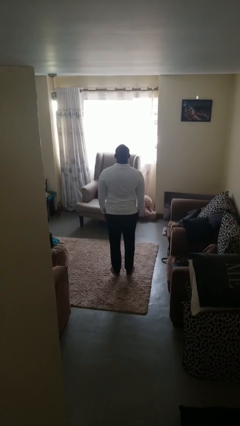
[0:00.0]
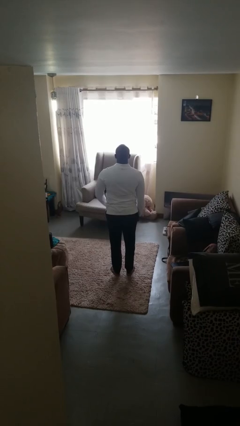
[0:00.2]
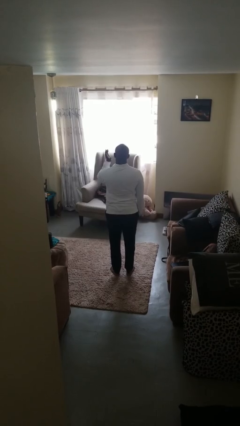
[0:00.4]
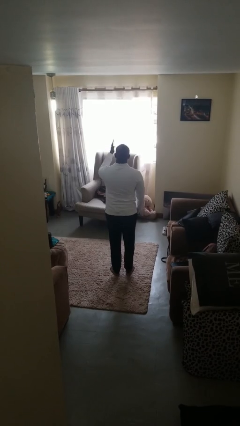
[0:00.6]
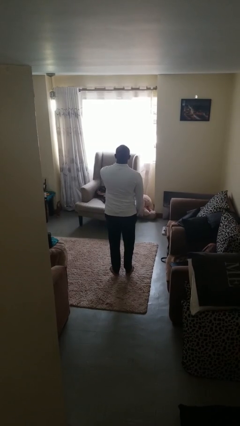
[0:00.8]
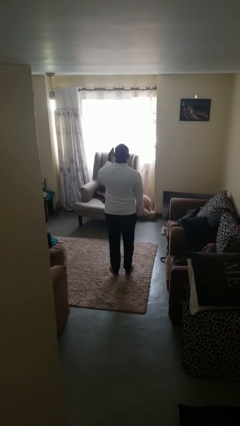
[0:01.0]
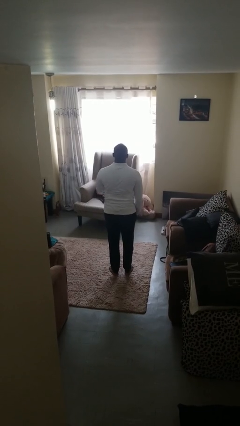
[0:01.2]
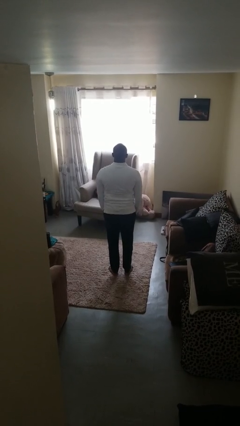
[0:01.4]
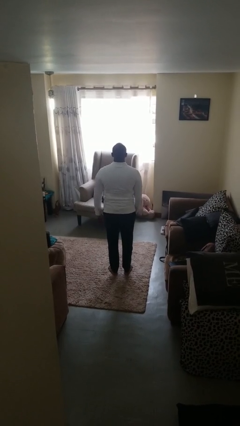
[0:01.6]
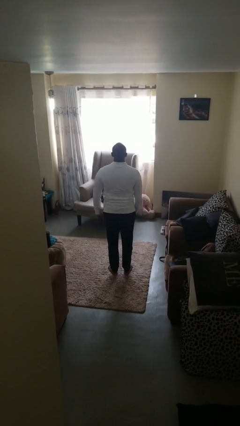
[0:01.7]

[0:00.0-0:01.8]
person karate chop

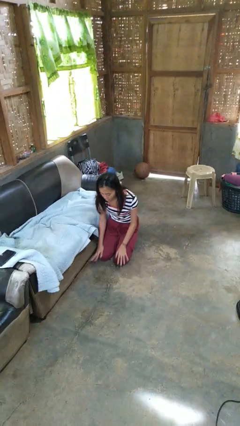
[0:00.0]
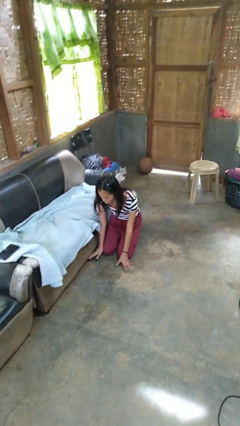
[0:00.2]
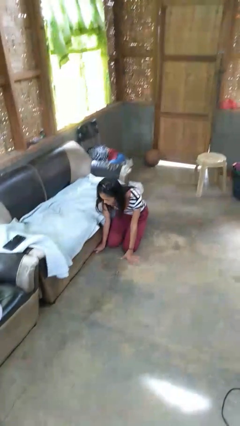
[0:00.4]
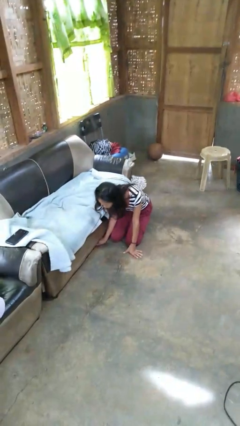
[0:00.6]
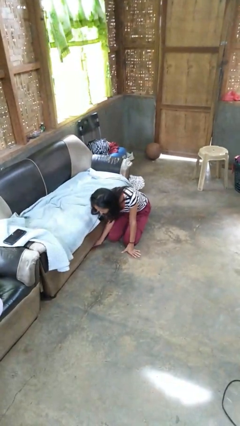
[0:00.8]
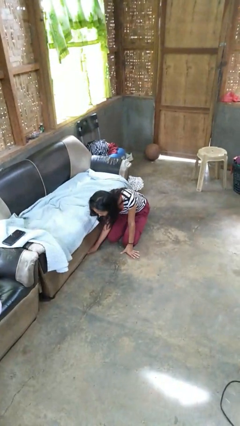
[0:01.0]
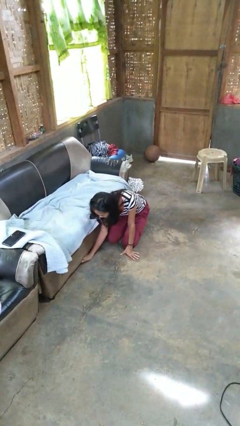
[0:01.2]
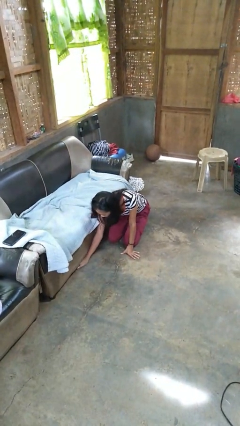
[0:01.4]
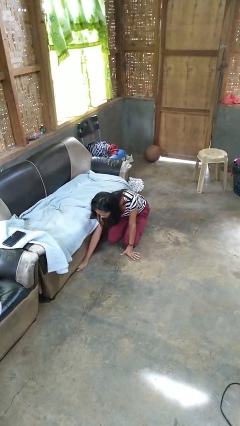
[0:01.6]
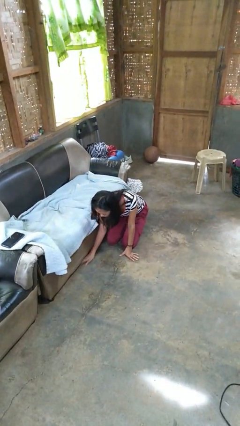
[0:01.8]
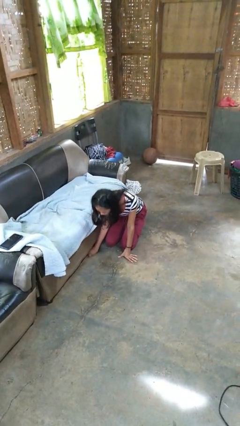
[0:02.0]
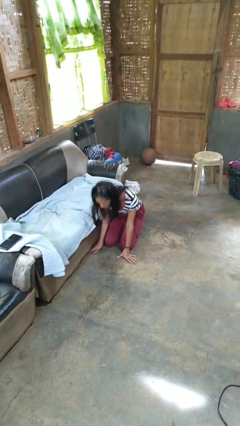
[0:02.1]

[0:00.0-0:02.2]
person searches under couch

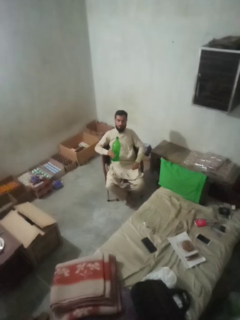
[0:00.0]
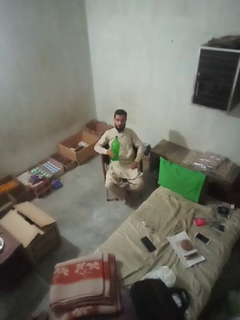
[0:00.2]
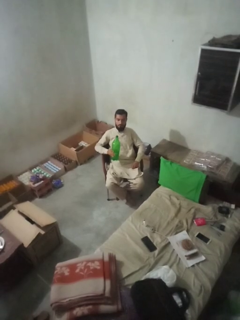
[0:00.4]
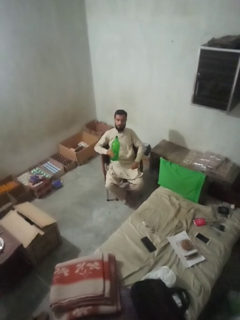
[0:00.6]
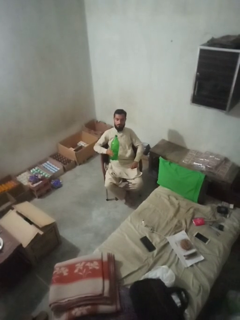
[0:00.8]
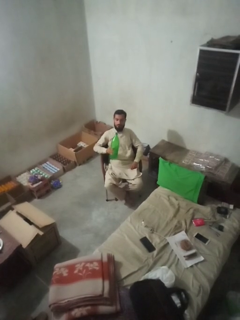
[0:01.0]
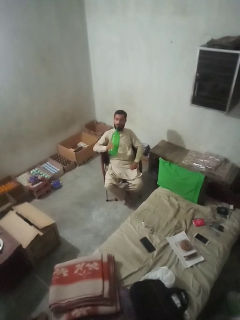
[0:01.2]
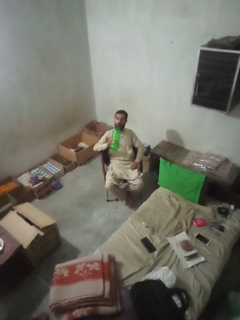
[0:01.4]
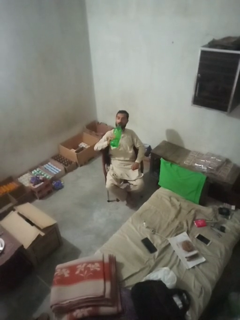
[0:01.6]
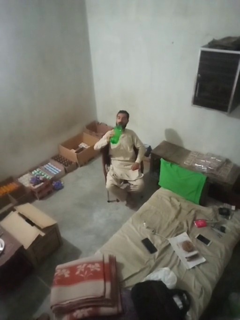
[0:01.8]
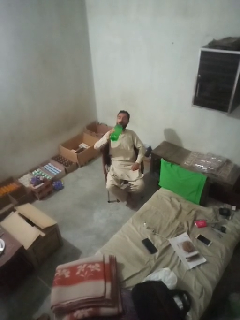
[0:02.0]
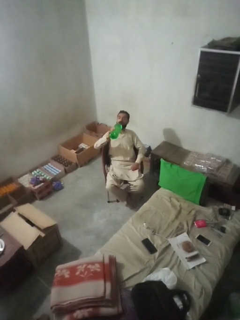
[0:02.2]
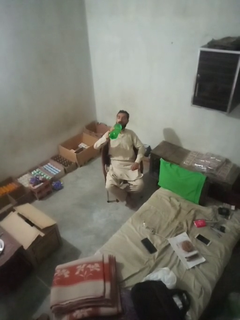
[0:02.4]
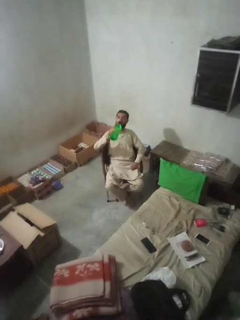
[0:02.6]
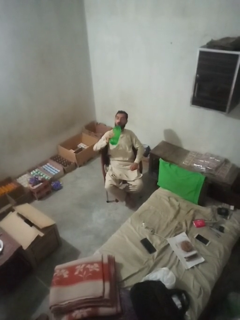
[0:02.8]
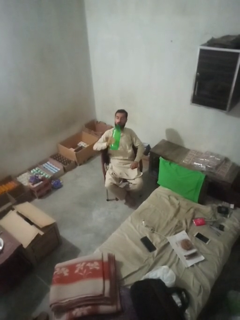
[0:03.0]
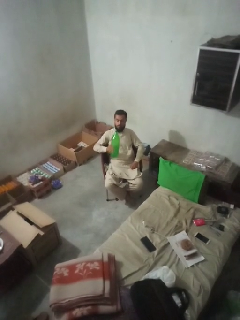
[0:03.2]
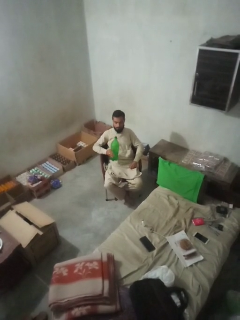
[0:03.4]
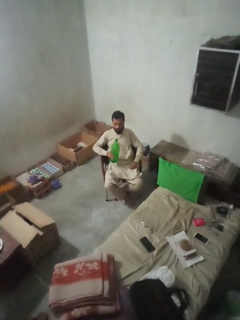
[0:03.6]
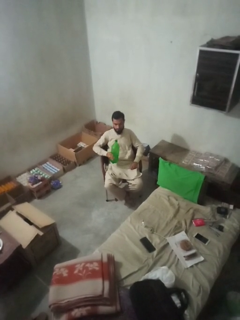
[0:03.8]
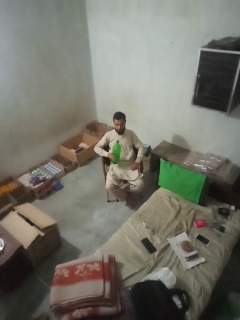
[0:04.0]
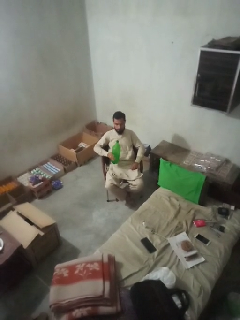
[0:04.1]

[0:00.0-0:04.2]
person drinks from bottle

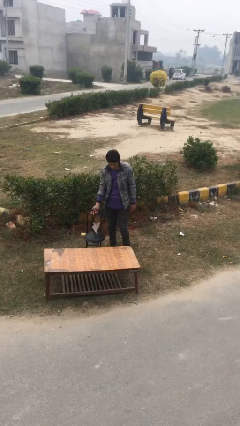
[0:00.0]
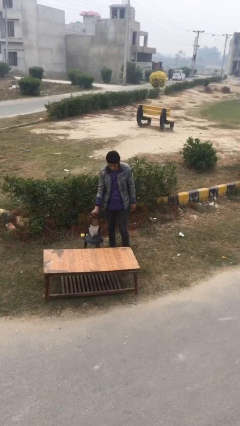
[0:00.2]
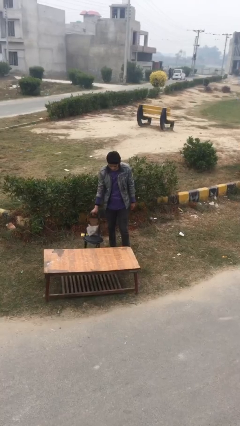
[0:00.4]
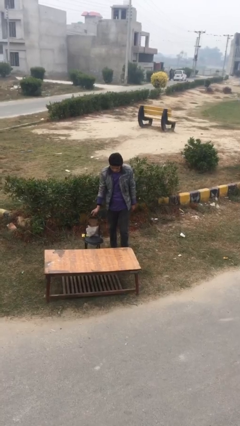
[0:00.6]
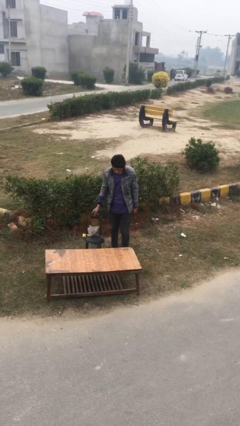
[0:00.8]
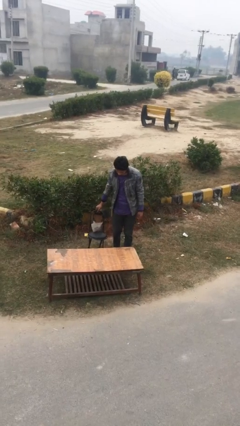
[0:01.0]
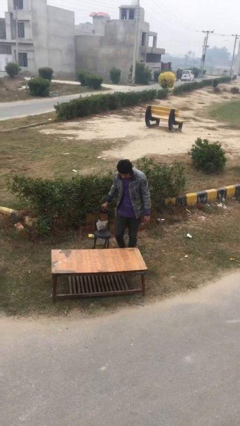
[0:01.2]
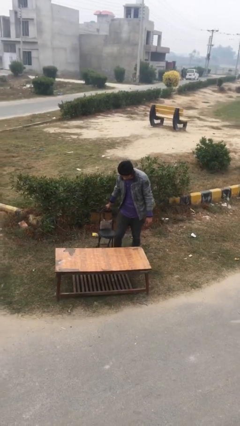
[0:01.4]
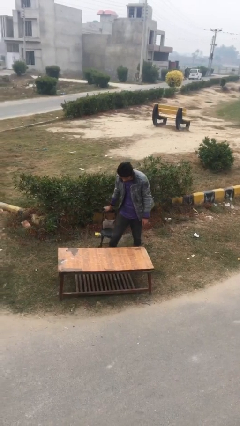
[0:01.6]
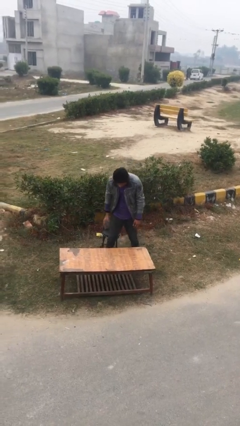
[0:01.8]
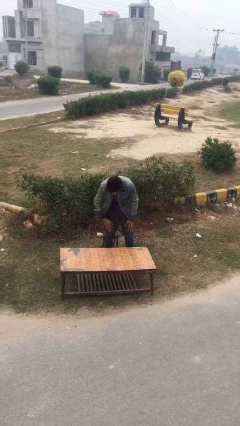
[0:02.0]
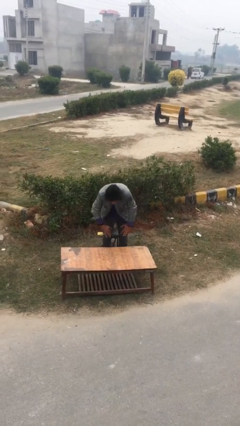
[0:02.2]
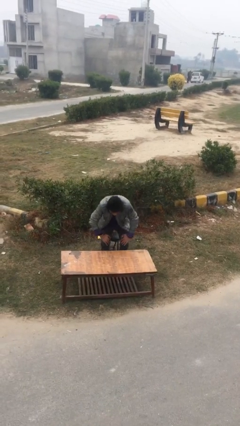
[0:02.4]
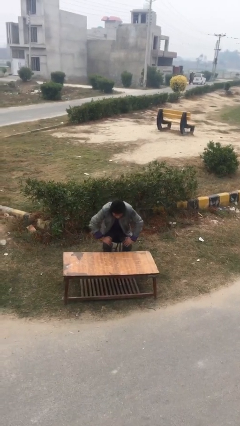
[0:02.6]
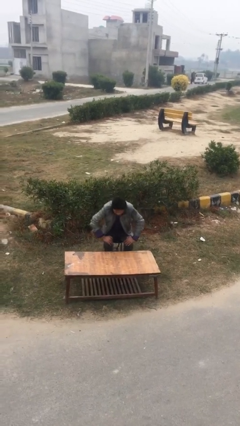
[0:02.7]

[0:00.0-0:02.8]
person sits down

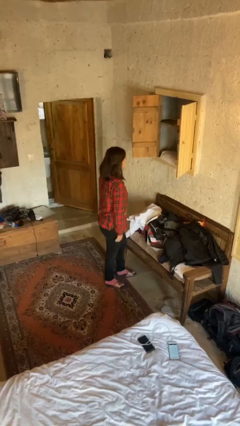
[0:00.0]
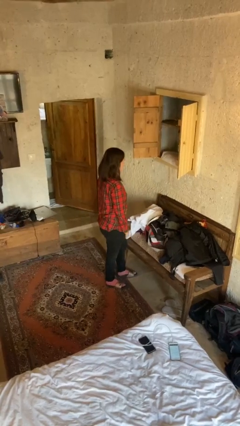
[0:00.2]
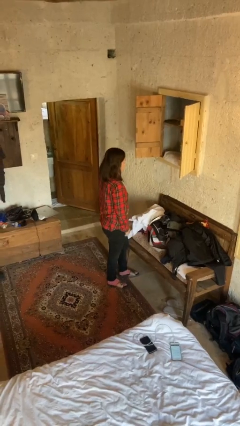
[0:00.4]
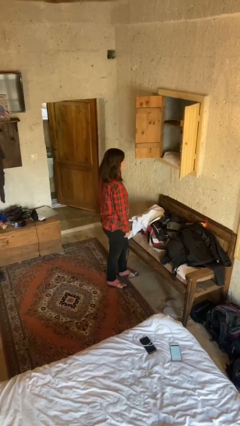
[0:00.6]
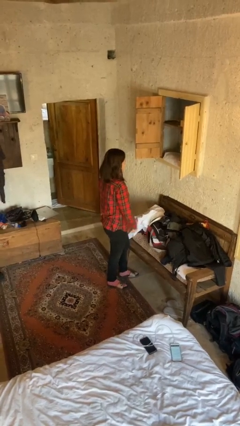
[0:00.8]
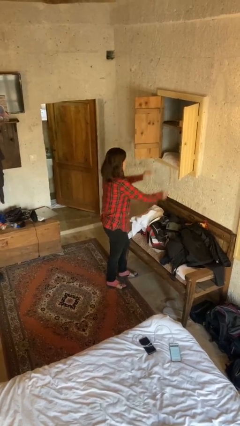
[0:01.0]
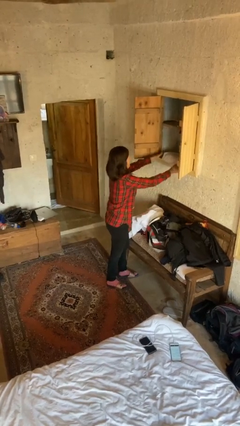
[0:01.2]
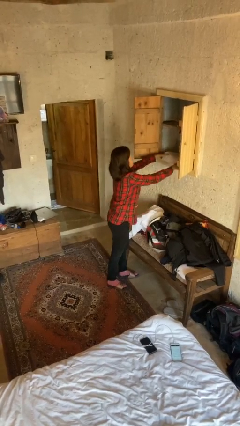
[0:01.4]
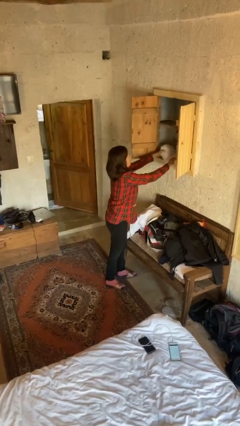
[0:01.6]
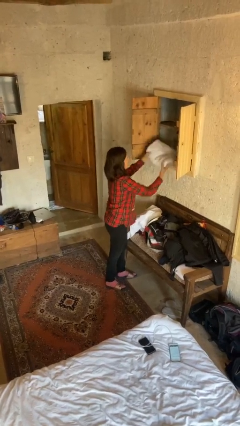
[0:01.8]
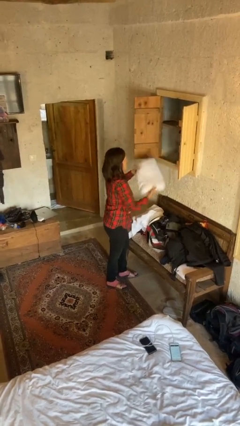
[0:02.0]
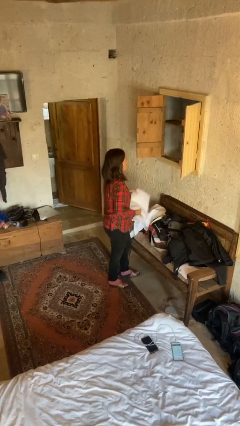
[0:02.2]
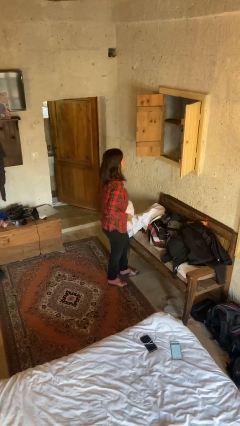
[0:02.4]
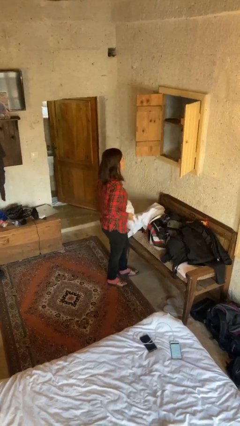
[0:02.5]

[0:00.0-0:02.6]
person takes clothes from dresser

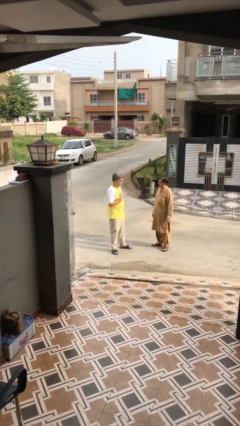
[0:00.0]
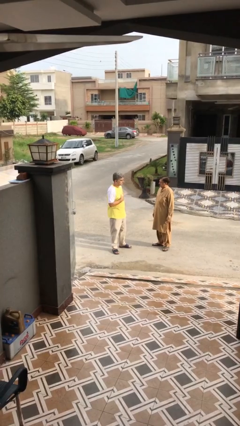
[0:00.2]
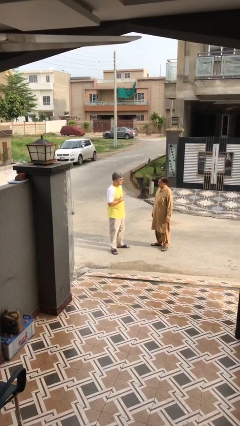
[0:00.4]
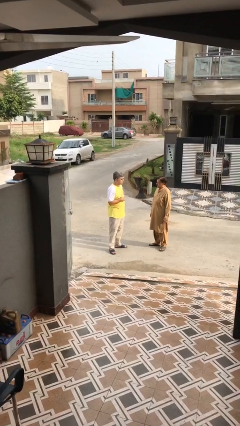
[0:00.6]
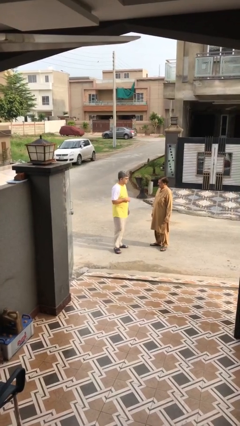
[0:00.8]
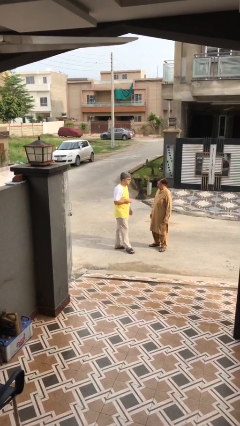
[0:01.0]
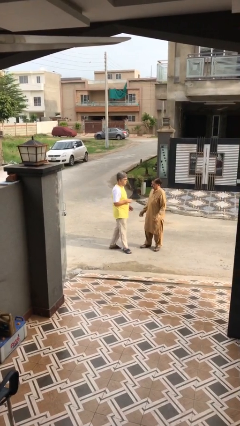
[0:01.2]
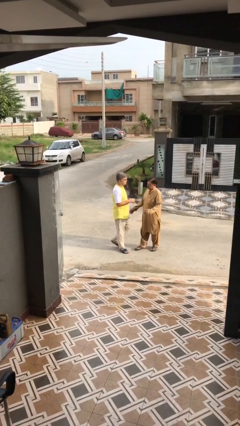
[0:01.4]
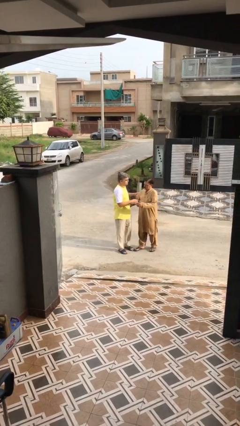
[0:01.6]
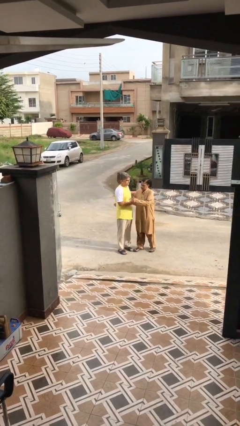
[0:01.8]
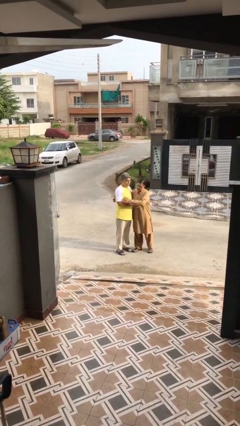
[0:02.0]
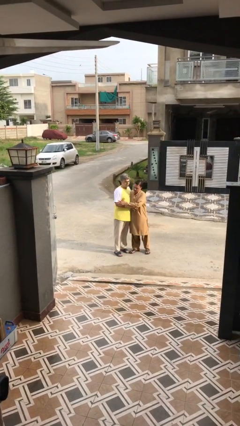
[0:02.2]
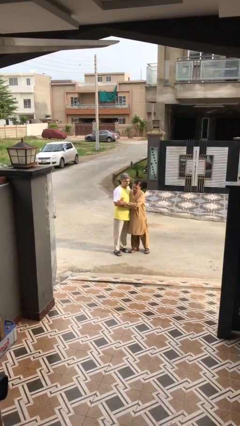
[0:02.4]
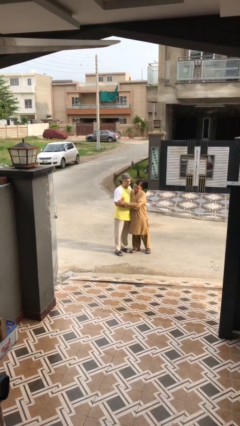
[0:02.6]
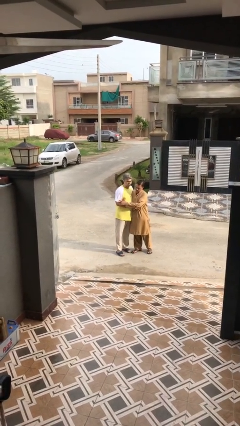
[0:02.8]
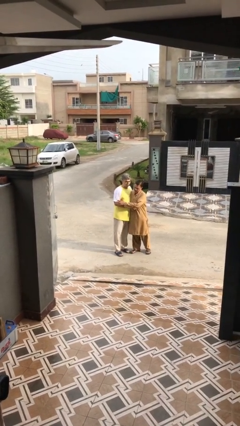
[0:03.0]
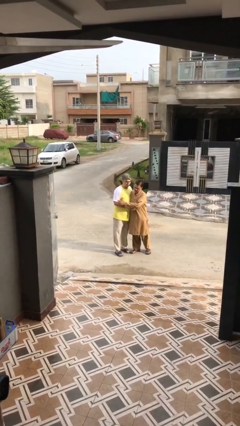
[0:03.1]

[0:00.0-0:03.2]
person embraces person

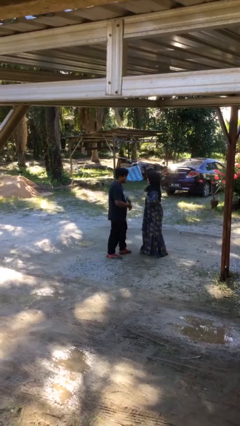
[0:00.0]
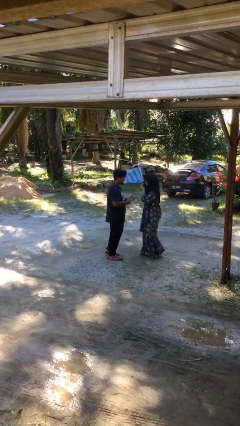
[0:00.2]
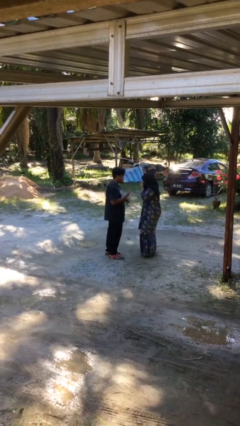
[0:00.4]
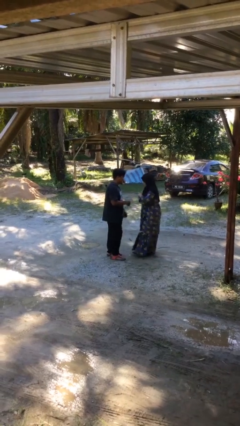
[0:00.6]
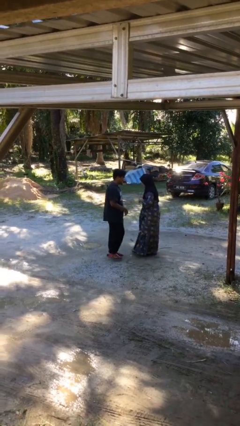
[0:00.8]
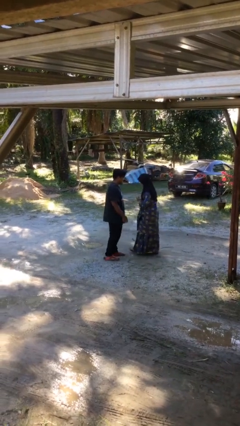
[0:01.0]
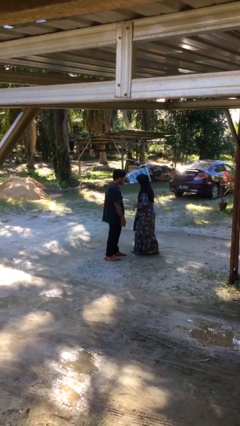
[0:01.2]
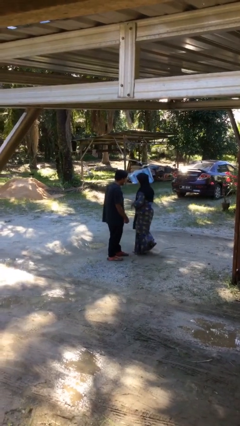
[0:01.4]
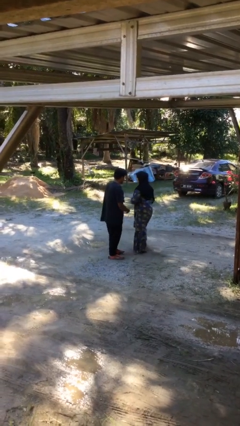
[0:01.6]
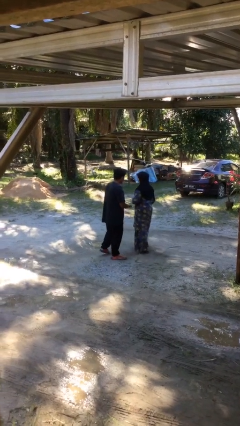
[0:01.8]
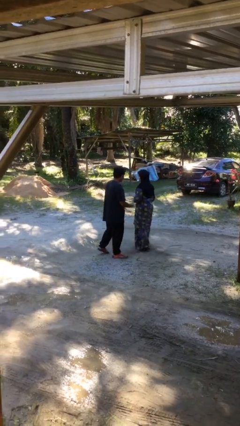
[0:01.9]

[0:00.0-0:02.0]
person talks to person
